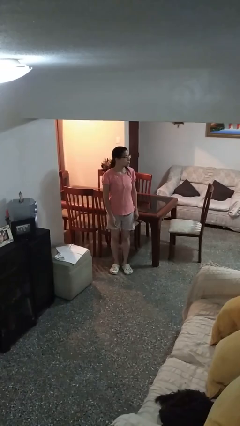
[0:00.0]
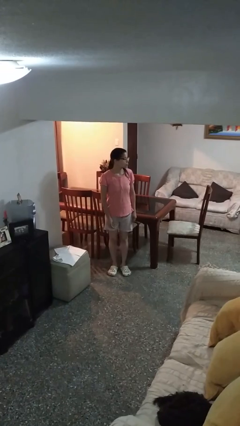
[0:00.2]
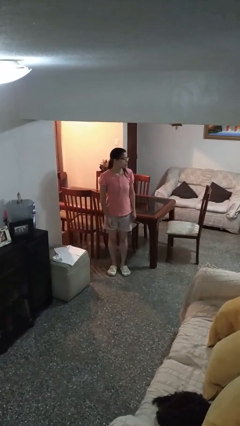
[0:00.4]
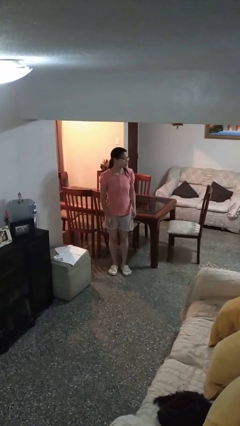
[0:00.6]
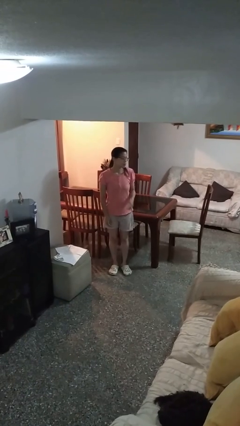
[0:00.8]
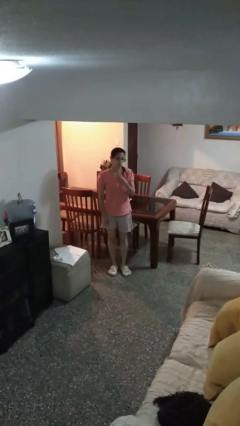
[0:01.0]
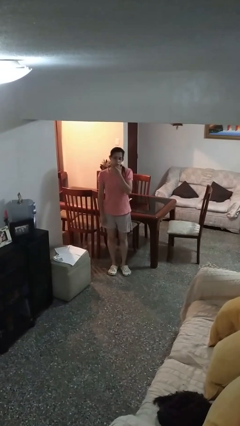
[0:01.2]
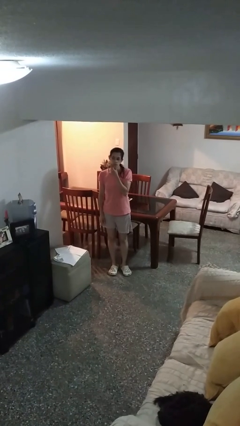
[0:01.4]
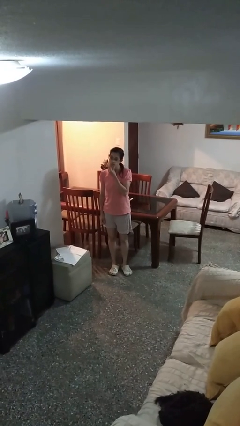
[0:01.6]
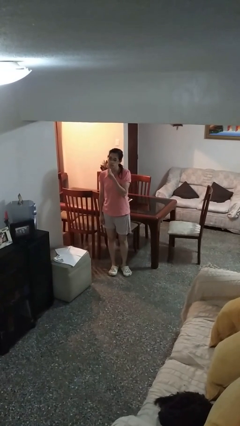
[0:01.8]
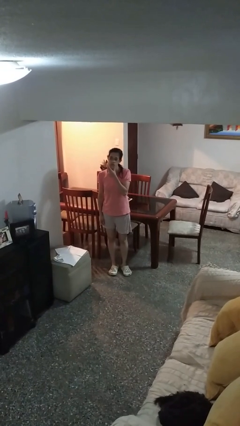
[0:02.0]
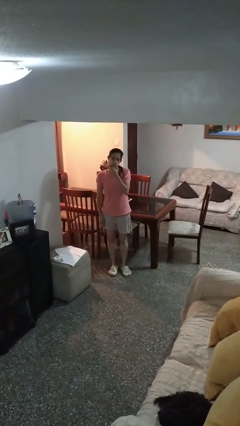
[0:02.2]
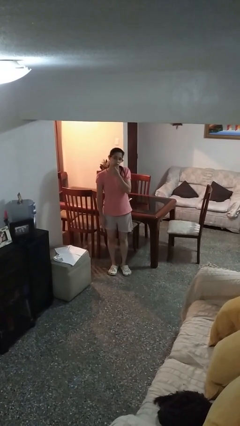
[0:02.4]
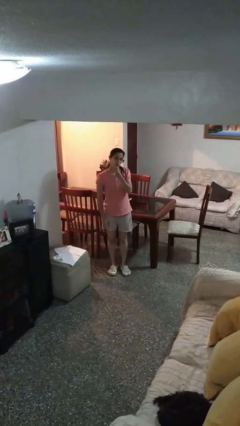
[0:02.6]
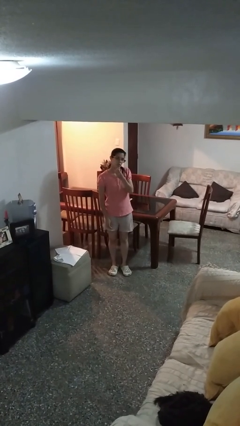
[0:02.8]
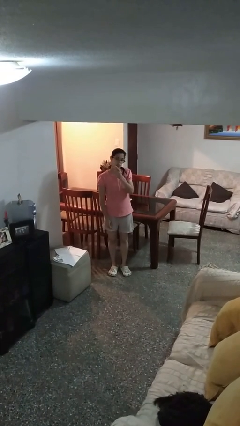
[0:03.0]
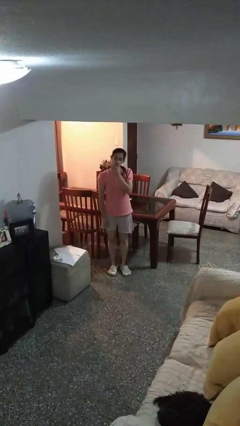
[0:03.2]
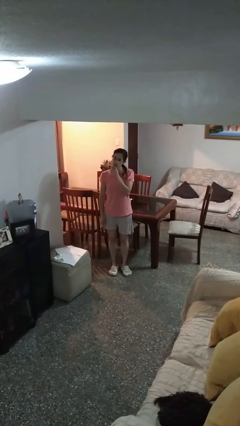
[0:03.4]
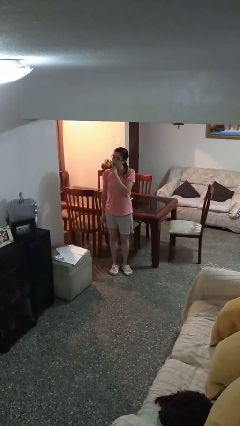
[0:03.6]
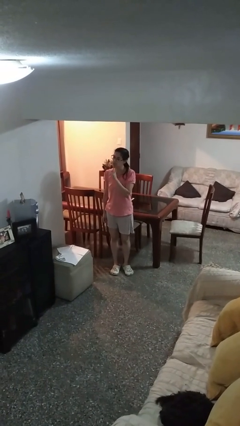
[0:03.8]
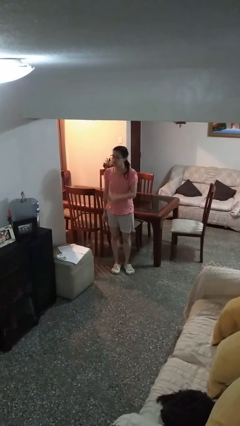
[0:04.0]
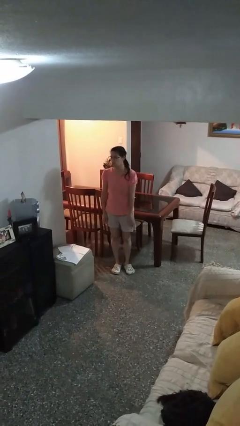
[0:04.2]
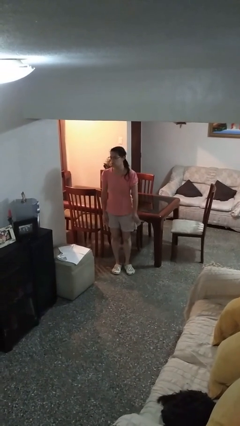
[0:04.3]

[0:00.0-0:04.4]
person strokes chin

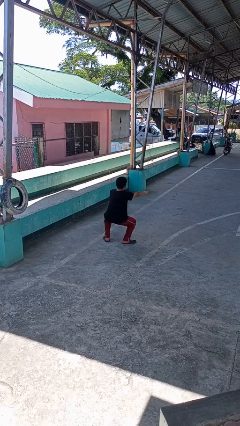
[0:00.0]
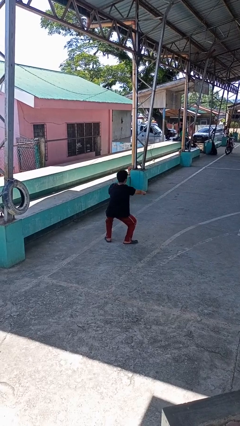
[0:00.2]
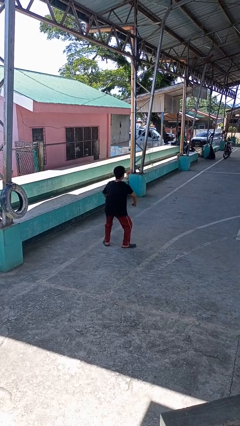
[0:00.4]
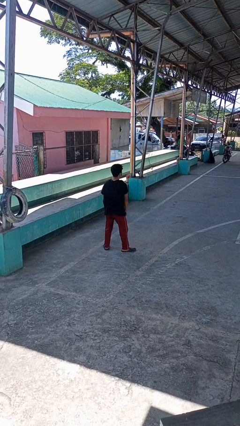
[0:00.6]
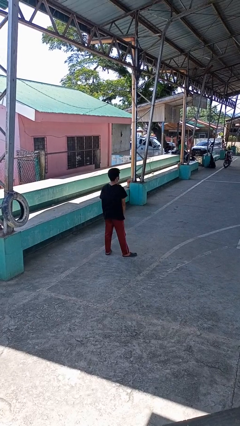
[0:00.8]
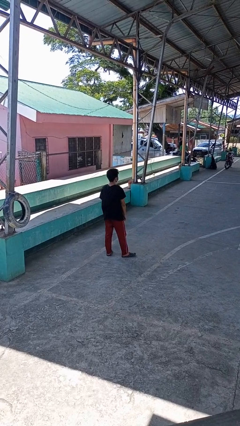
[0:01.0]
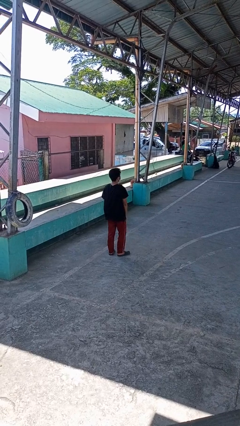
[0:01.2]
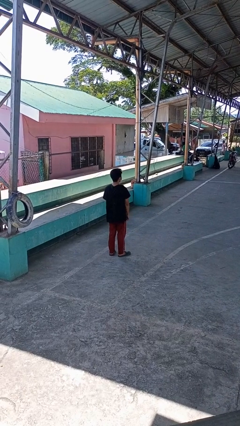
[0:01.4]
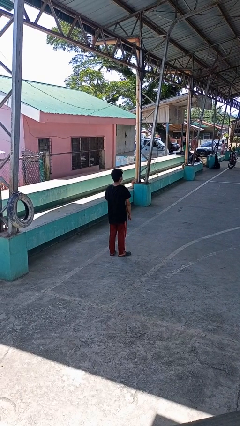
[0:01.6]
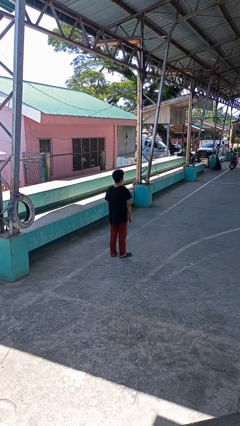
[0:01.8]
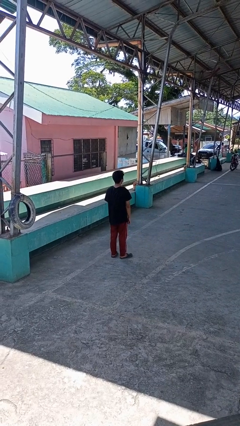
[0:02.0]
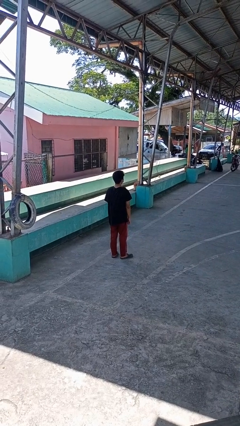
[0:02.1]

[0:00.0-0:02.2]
person stands up

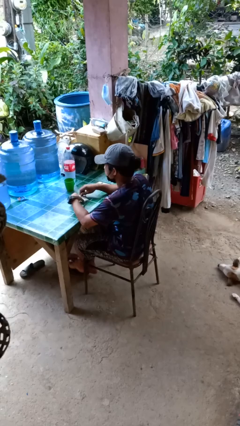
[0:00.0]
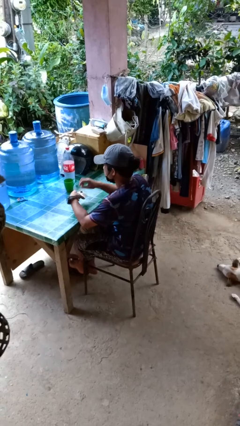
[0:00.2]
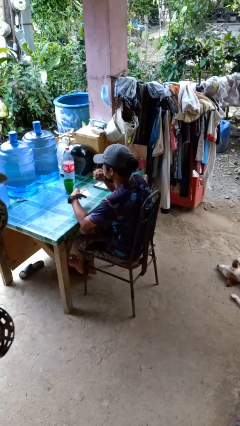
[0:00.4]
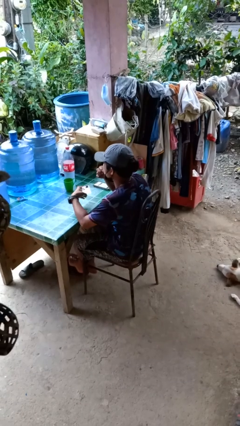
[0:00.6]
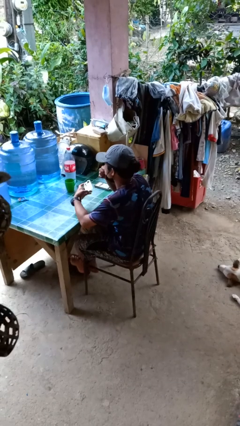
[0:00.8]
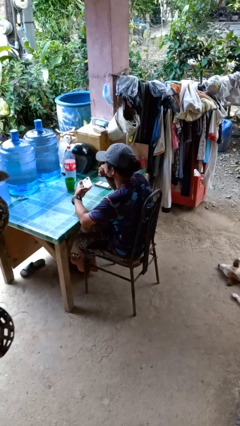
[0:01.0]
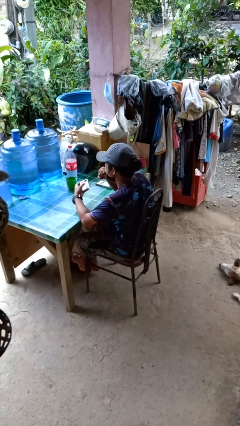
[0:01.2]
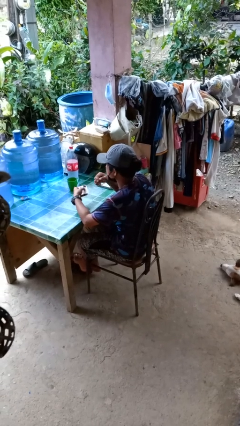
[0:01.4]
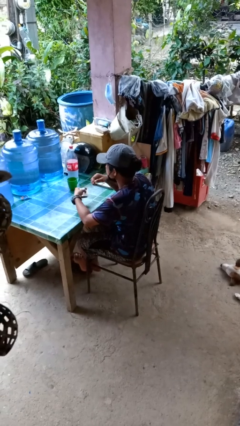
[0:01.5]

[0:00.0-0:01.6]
person takes medicine pills

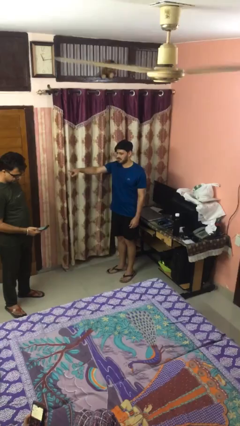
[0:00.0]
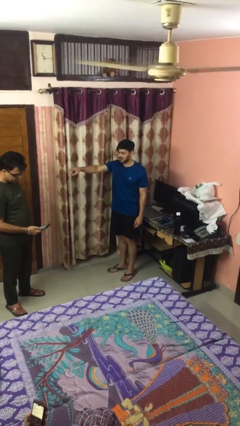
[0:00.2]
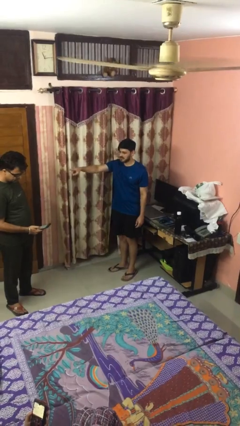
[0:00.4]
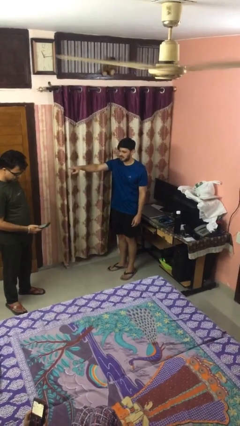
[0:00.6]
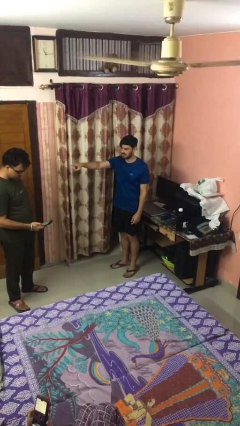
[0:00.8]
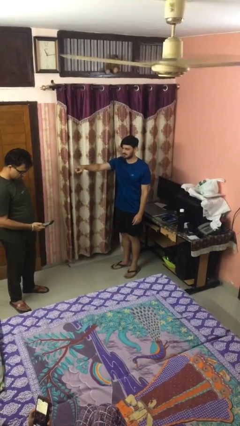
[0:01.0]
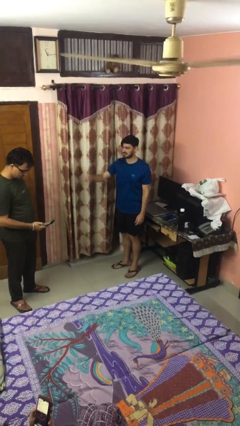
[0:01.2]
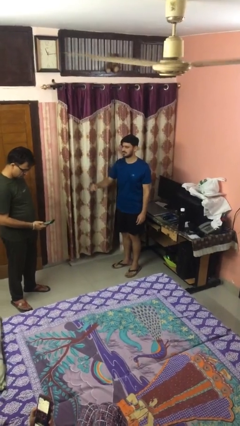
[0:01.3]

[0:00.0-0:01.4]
person points at person

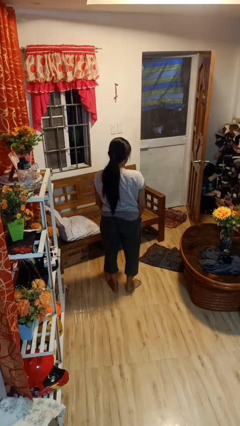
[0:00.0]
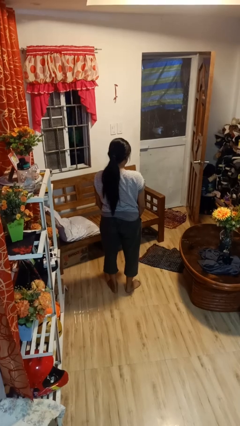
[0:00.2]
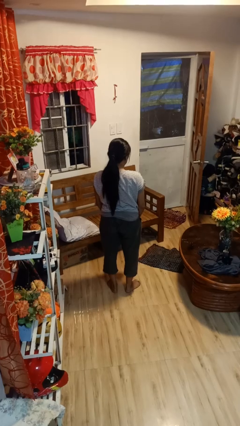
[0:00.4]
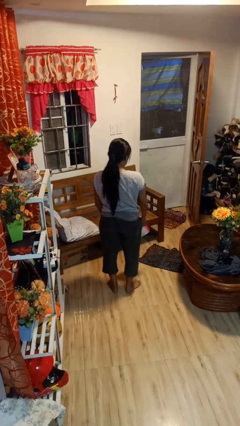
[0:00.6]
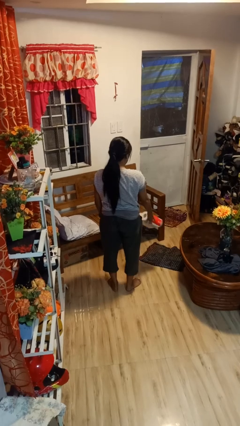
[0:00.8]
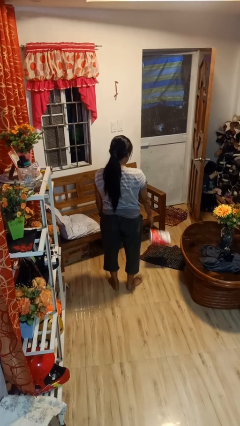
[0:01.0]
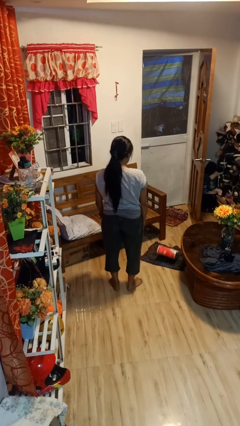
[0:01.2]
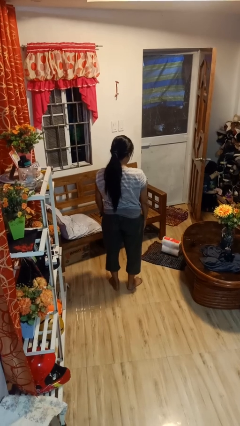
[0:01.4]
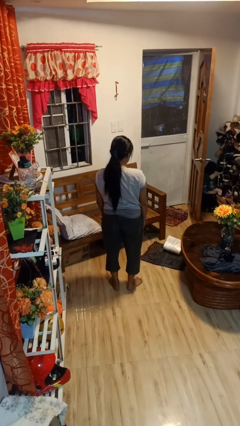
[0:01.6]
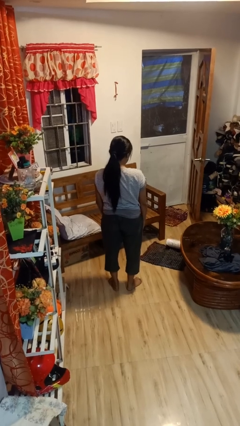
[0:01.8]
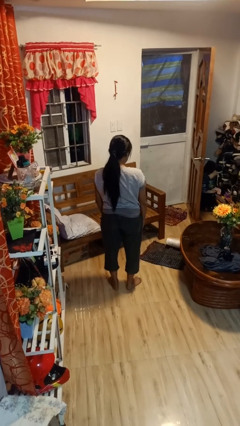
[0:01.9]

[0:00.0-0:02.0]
person throws object to ground

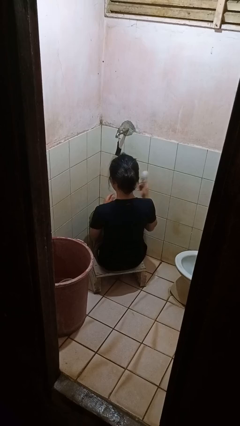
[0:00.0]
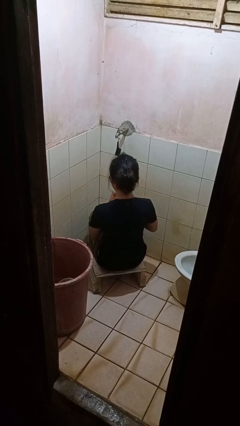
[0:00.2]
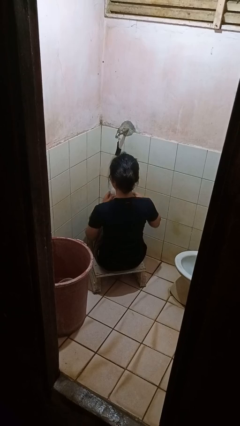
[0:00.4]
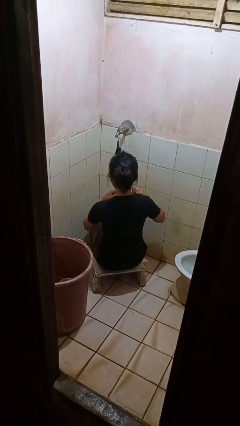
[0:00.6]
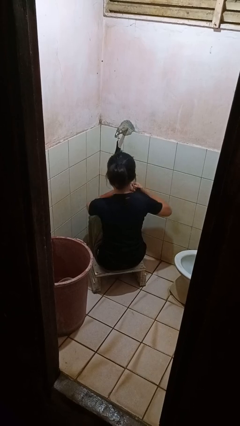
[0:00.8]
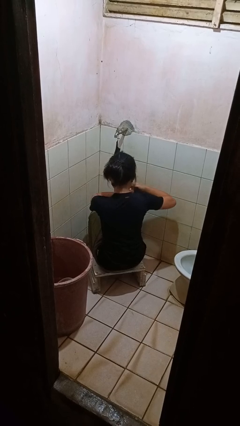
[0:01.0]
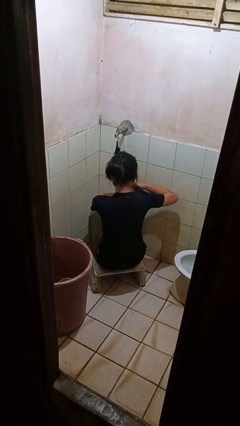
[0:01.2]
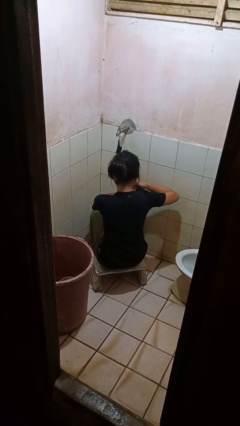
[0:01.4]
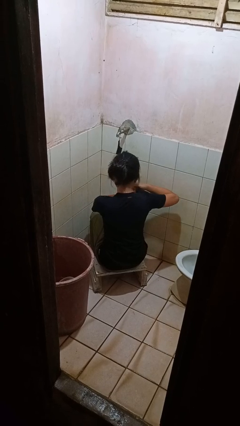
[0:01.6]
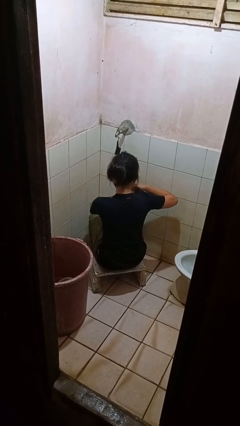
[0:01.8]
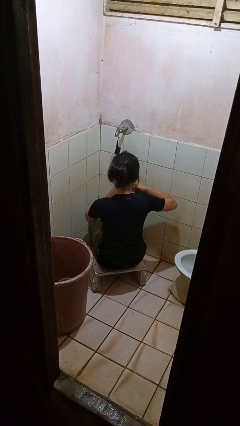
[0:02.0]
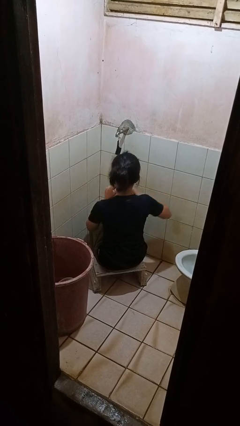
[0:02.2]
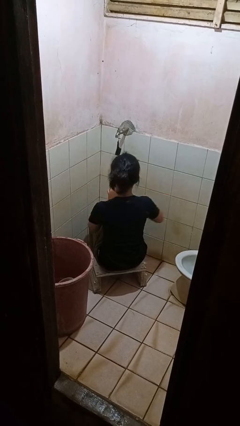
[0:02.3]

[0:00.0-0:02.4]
person applies deodorant

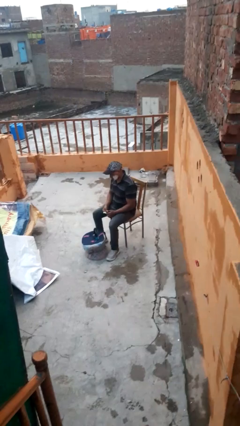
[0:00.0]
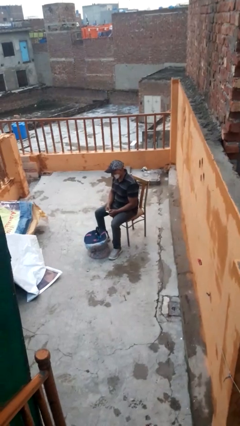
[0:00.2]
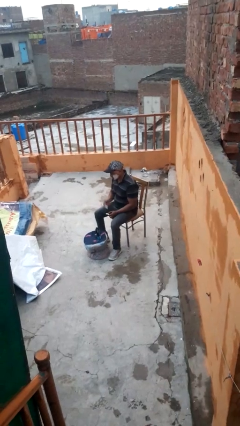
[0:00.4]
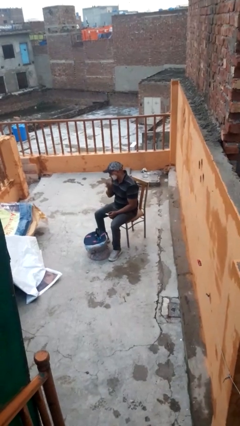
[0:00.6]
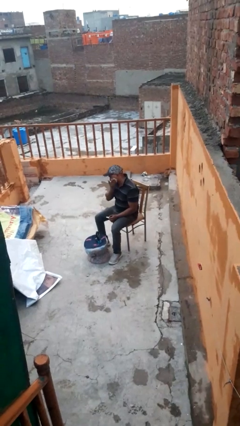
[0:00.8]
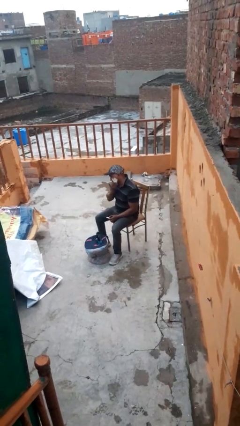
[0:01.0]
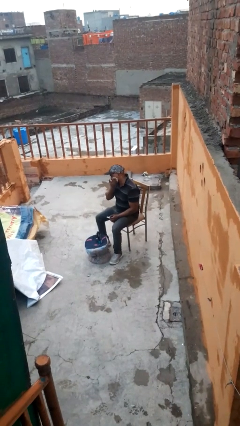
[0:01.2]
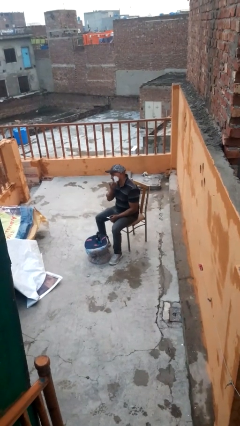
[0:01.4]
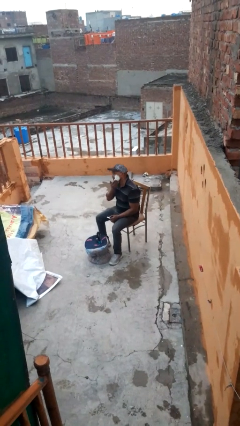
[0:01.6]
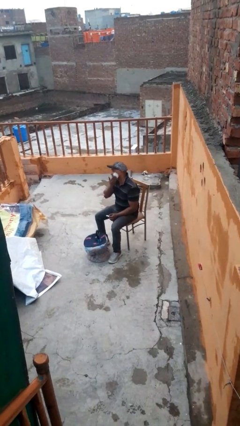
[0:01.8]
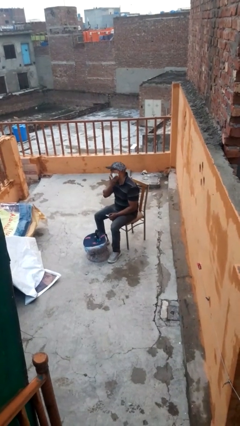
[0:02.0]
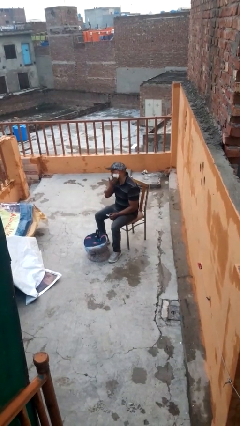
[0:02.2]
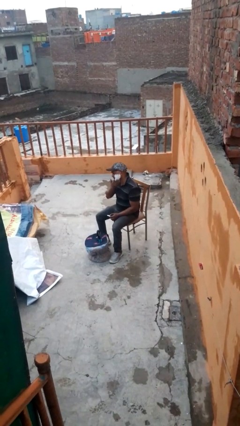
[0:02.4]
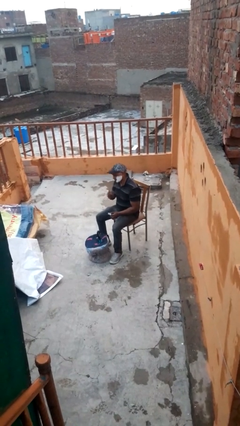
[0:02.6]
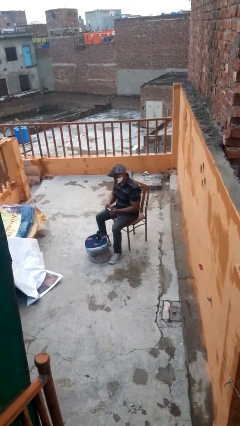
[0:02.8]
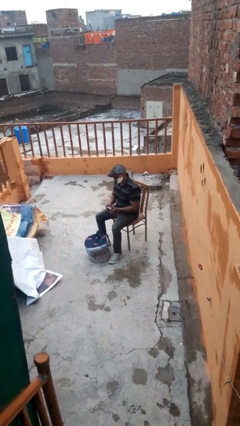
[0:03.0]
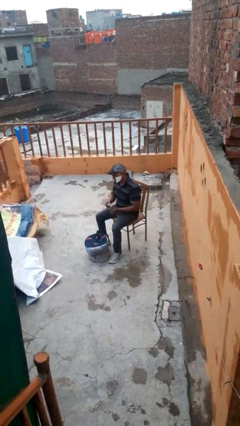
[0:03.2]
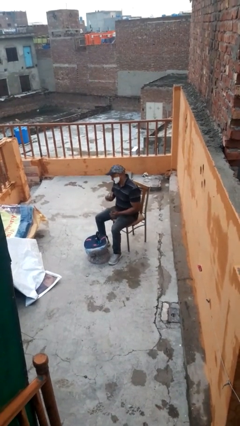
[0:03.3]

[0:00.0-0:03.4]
person applies shaving cream
